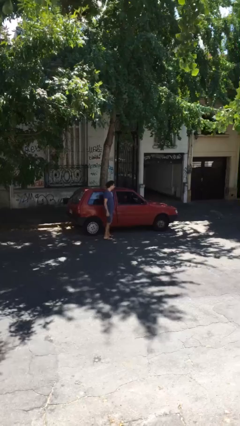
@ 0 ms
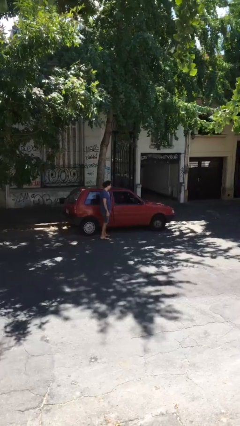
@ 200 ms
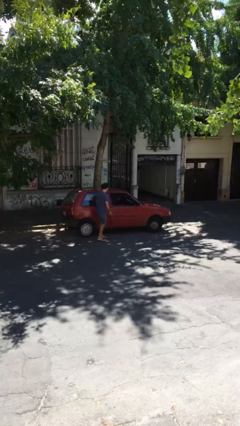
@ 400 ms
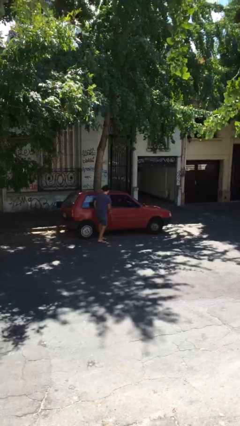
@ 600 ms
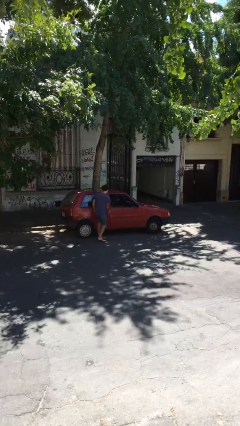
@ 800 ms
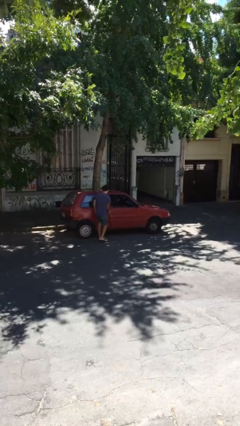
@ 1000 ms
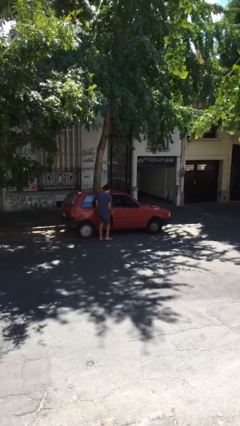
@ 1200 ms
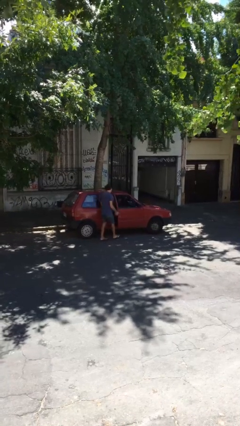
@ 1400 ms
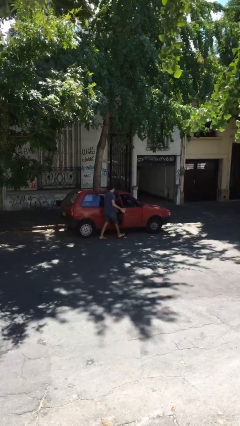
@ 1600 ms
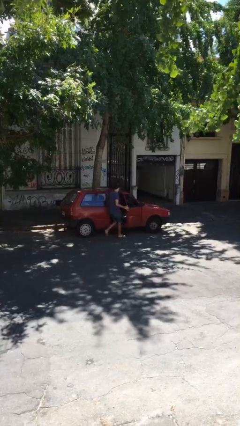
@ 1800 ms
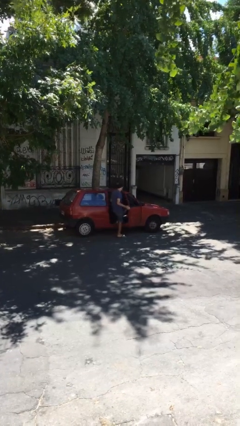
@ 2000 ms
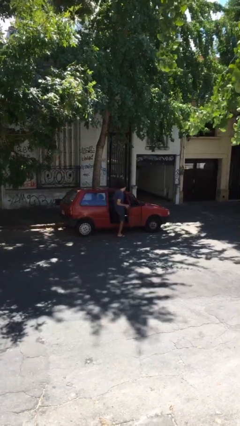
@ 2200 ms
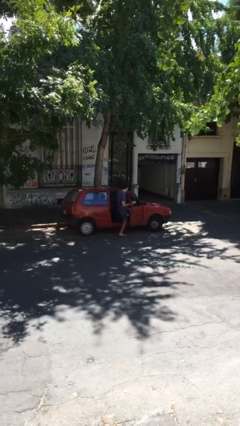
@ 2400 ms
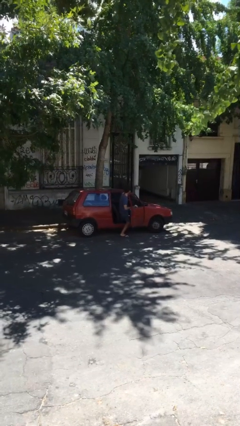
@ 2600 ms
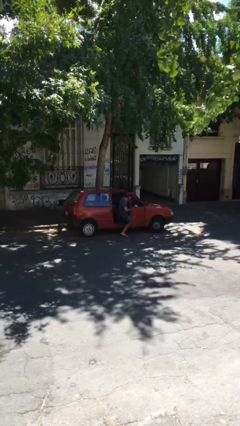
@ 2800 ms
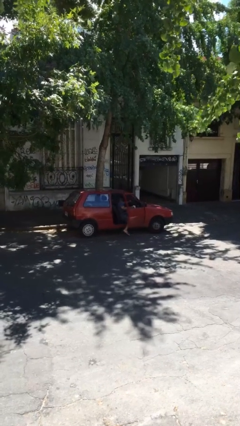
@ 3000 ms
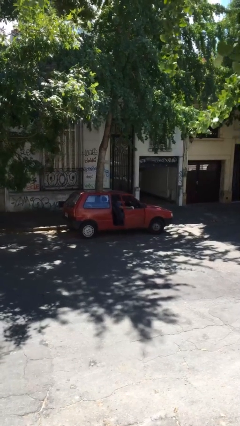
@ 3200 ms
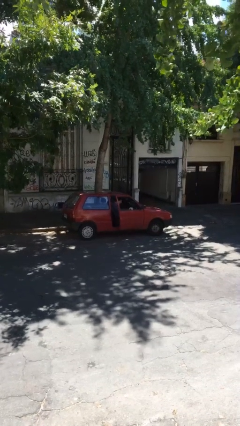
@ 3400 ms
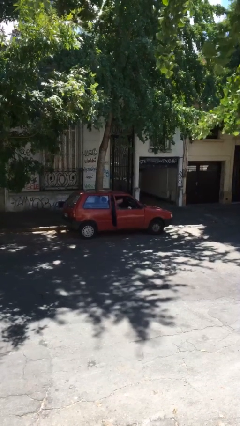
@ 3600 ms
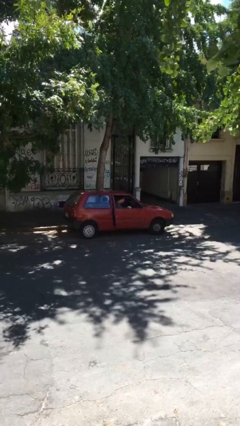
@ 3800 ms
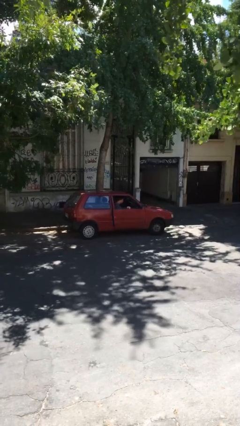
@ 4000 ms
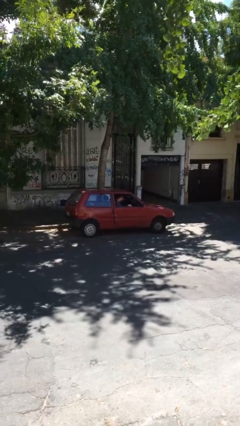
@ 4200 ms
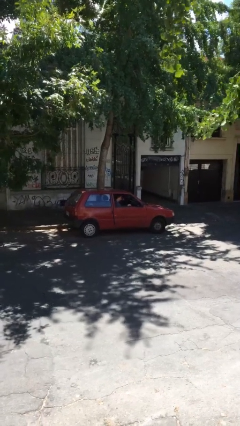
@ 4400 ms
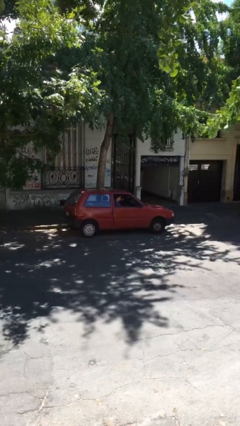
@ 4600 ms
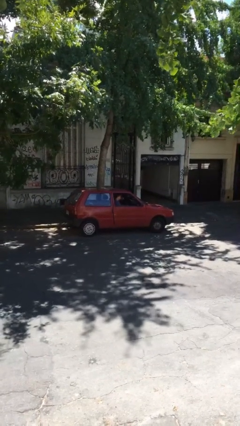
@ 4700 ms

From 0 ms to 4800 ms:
car picks up person

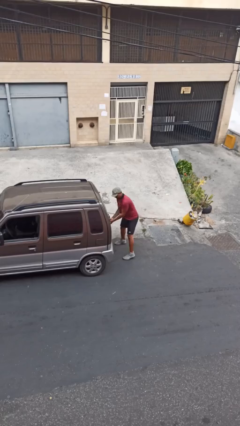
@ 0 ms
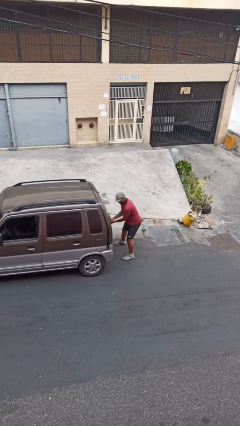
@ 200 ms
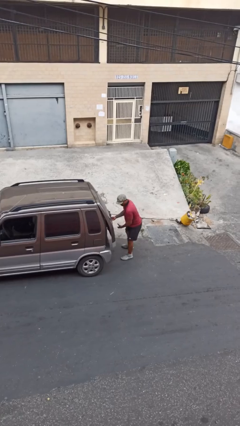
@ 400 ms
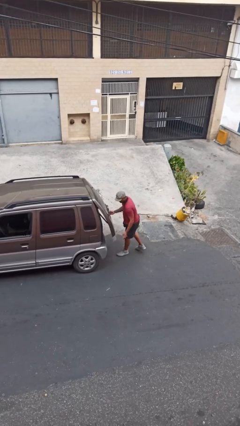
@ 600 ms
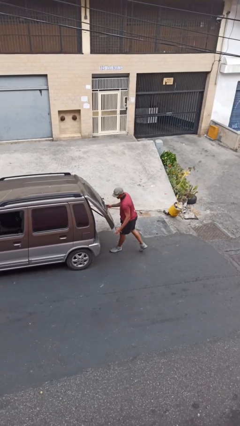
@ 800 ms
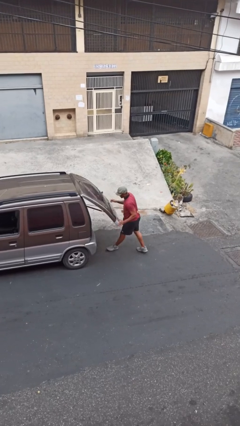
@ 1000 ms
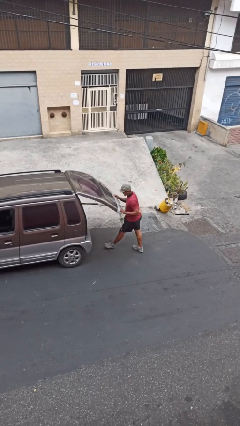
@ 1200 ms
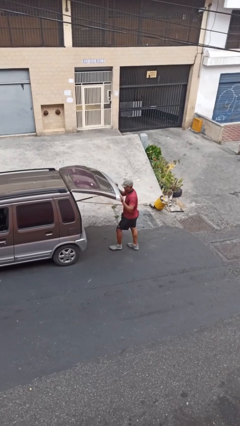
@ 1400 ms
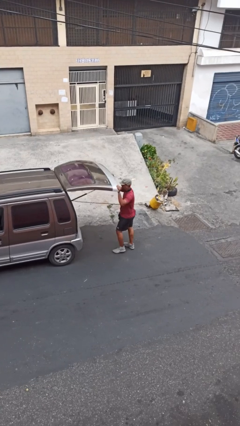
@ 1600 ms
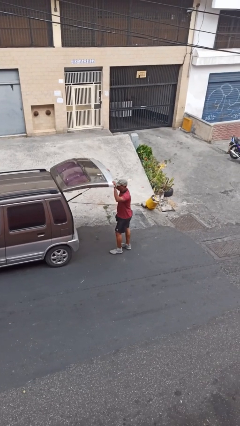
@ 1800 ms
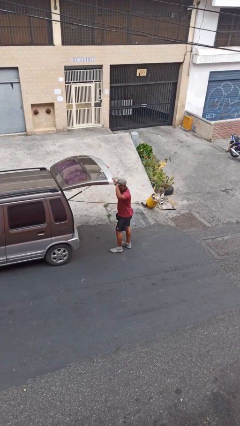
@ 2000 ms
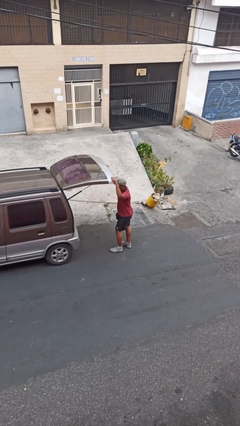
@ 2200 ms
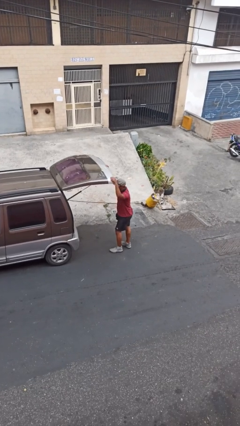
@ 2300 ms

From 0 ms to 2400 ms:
person opens car trunk

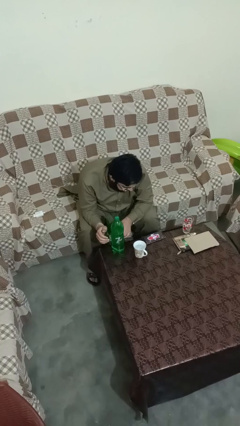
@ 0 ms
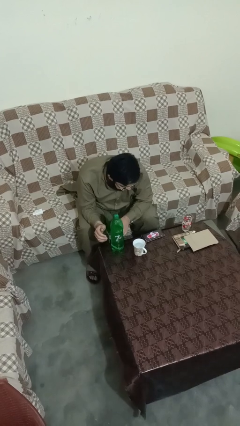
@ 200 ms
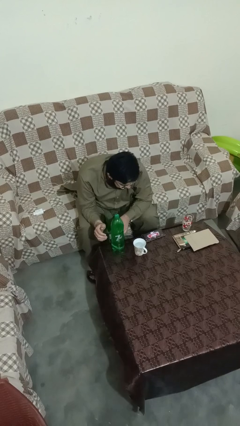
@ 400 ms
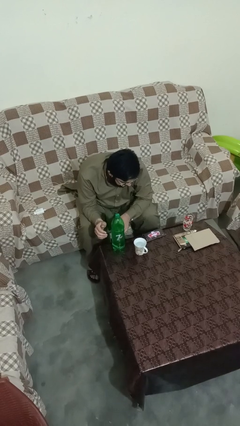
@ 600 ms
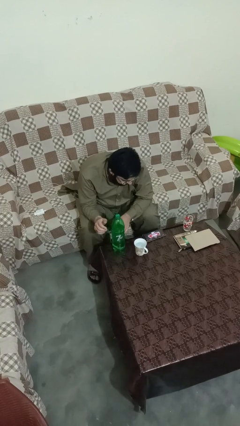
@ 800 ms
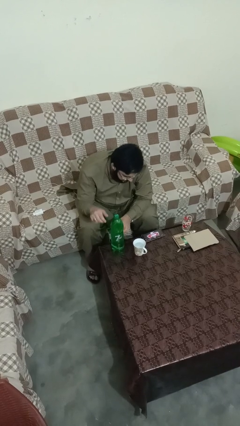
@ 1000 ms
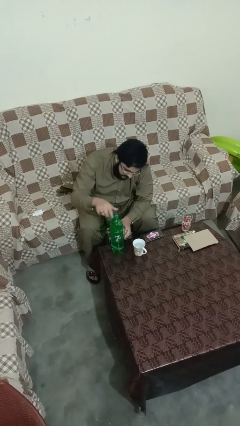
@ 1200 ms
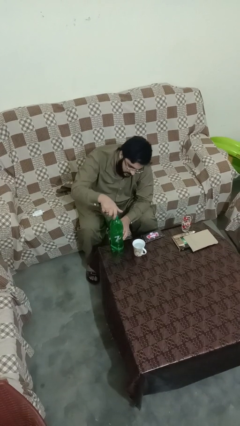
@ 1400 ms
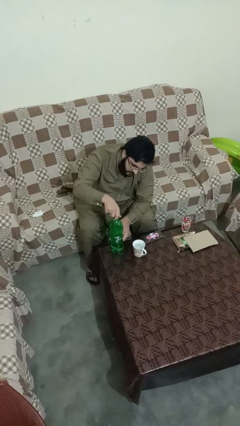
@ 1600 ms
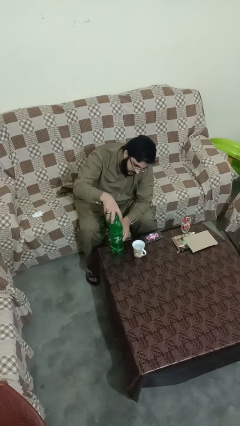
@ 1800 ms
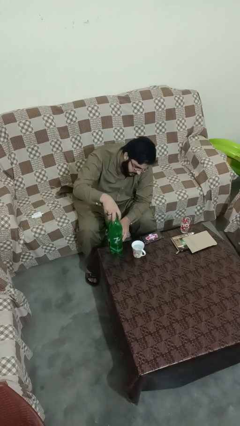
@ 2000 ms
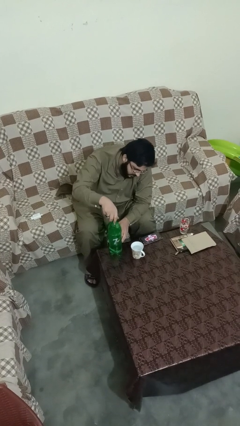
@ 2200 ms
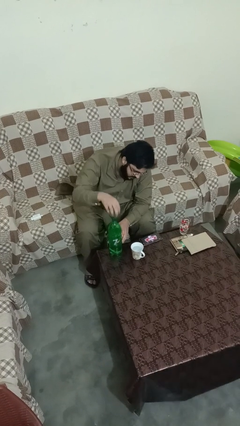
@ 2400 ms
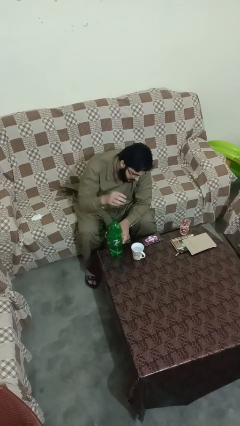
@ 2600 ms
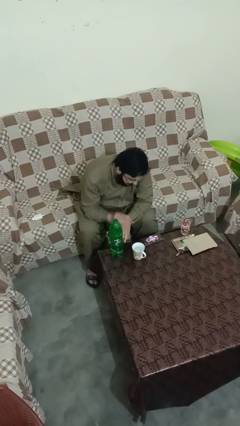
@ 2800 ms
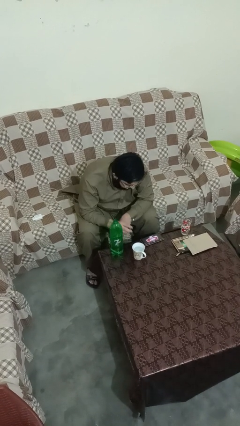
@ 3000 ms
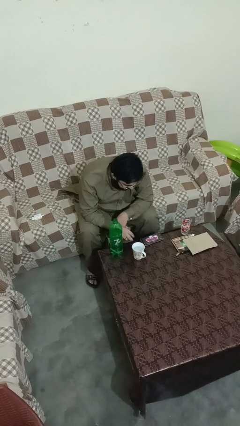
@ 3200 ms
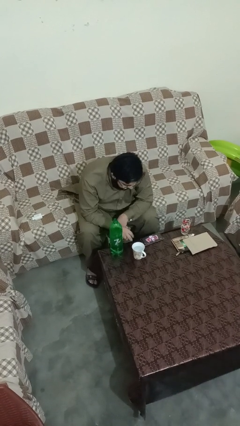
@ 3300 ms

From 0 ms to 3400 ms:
person unscrews lid from bottle

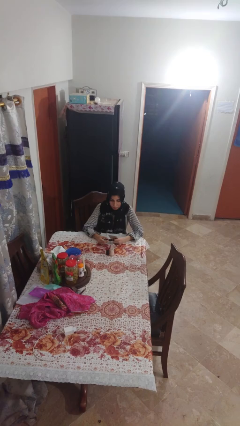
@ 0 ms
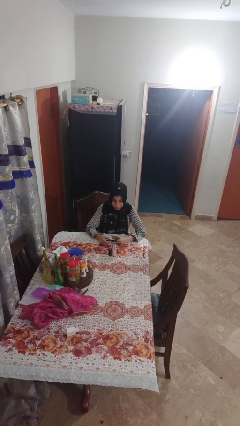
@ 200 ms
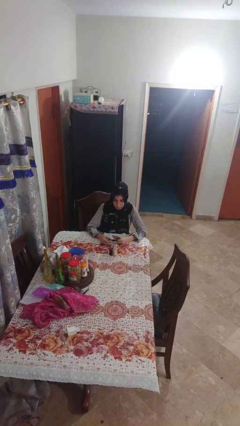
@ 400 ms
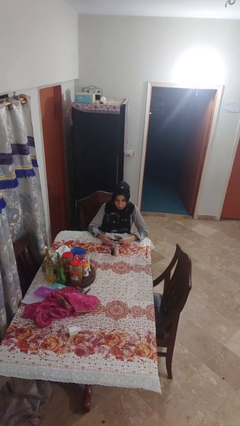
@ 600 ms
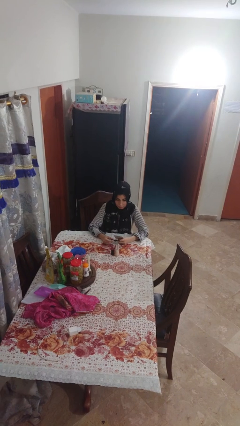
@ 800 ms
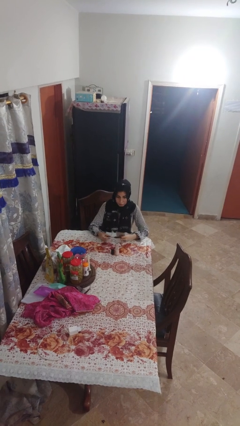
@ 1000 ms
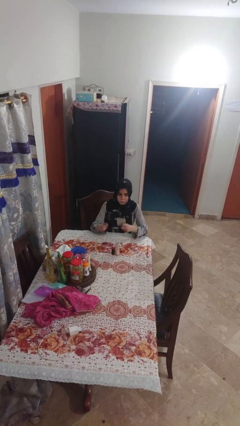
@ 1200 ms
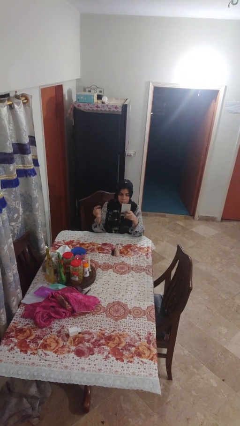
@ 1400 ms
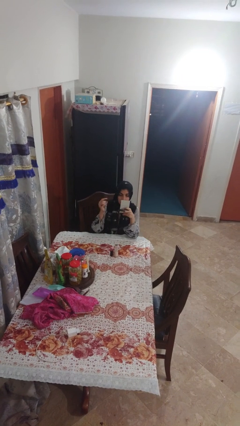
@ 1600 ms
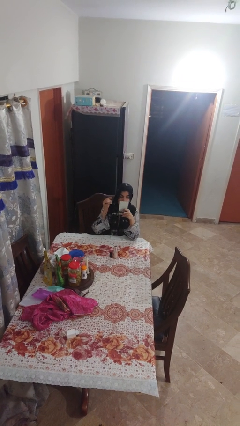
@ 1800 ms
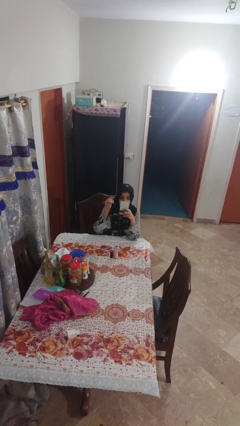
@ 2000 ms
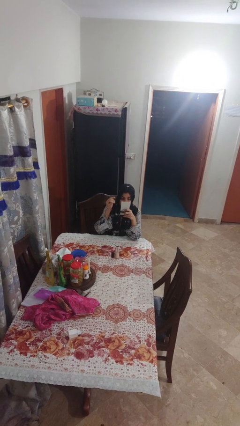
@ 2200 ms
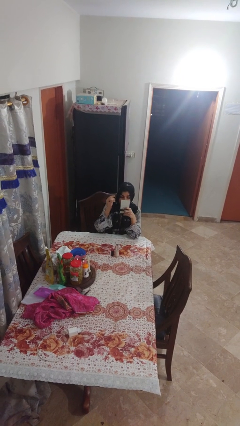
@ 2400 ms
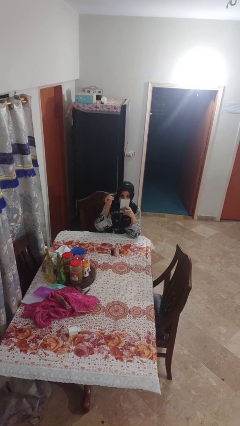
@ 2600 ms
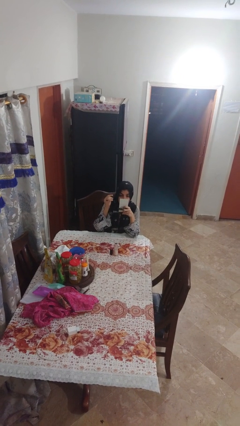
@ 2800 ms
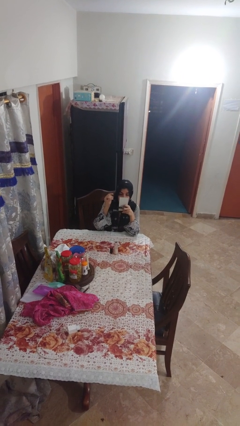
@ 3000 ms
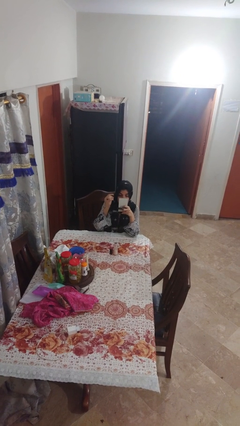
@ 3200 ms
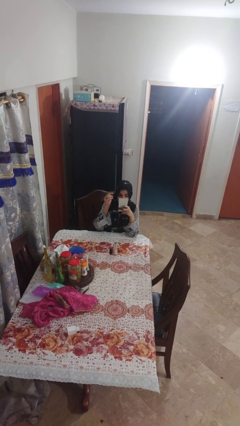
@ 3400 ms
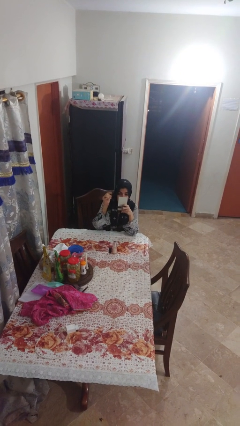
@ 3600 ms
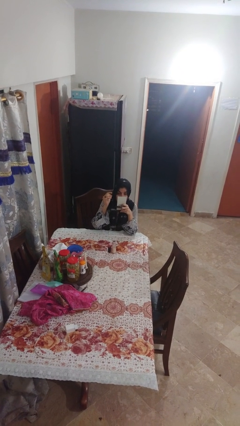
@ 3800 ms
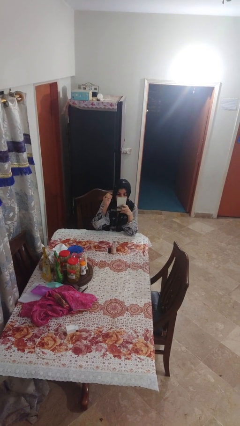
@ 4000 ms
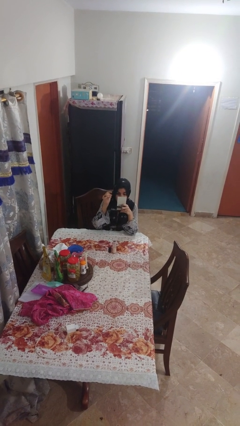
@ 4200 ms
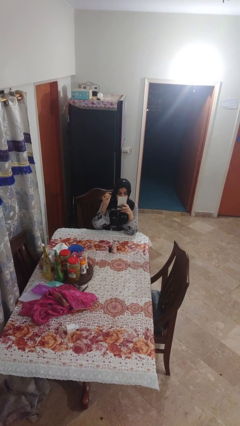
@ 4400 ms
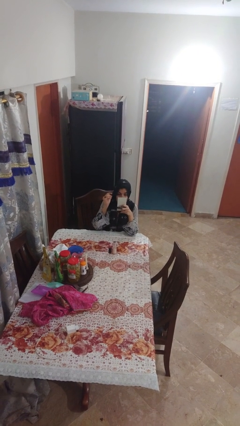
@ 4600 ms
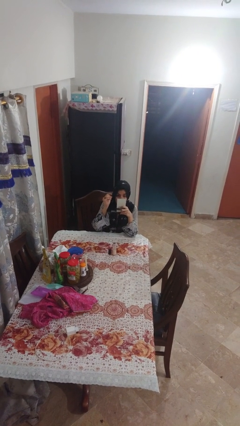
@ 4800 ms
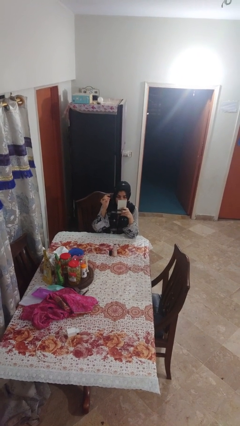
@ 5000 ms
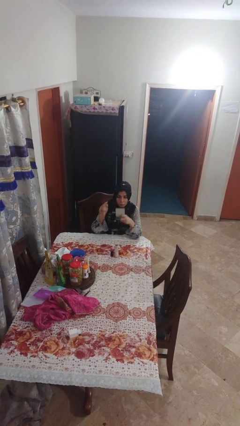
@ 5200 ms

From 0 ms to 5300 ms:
person applies eye makeup

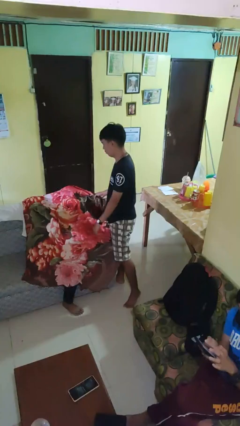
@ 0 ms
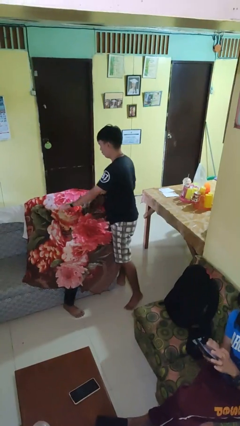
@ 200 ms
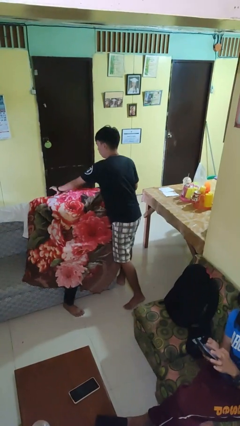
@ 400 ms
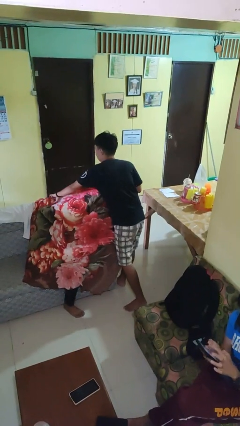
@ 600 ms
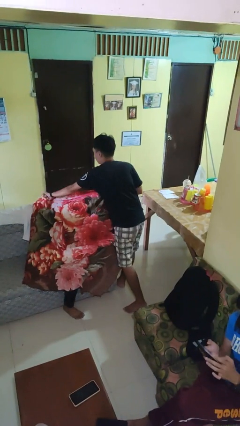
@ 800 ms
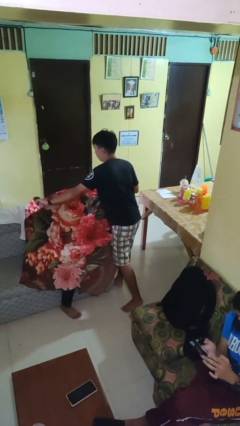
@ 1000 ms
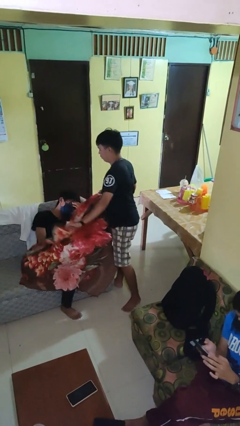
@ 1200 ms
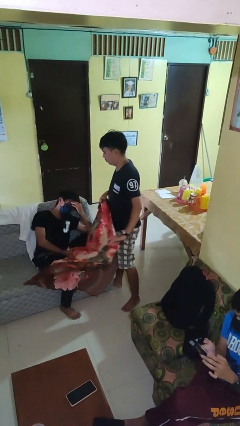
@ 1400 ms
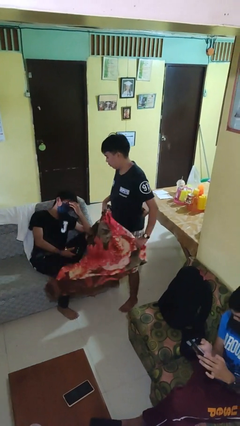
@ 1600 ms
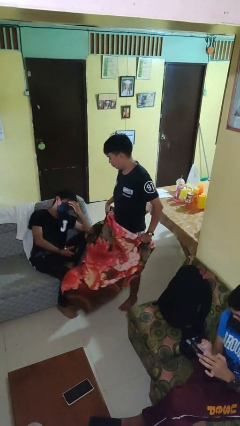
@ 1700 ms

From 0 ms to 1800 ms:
person uncovers friend with blanket
